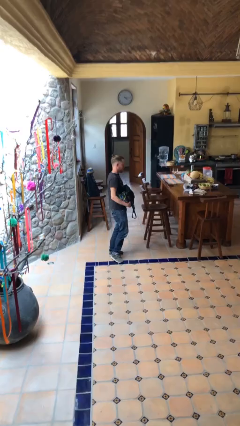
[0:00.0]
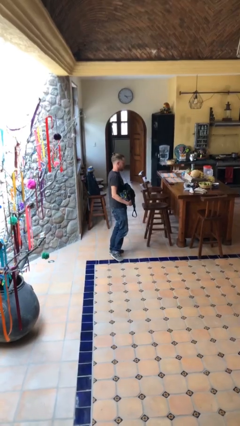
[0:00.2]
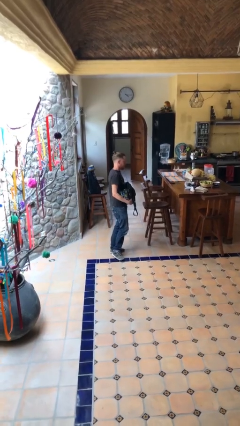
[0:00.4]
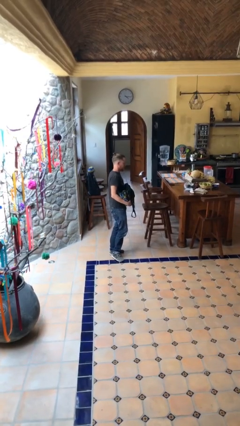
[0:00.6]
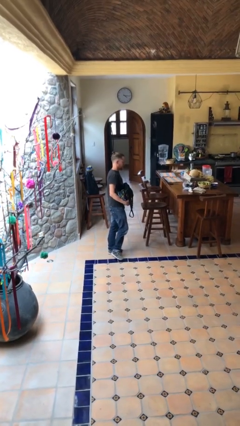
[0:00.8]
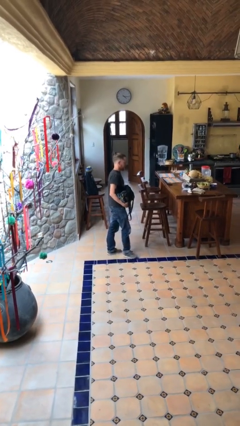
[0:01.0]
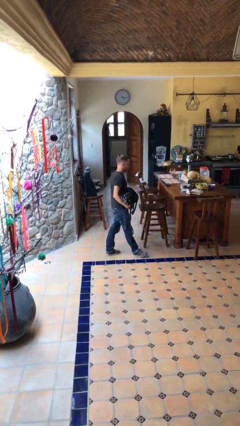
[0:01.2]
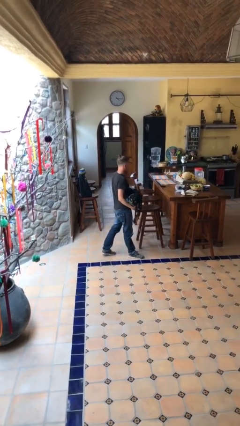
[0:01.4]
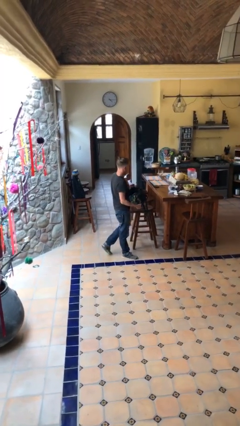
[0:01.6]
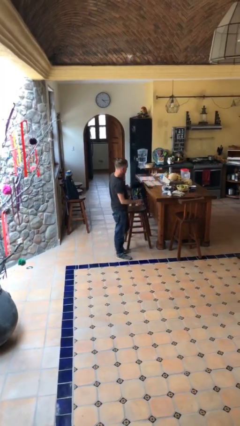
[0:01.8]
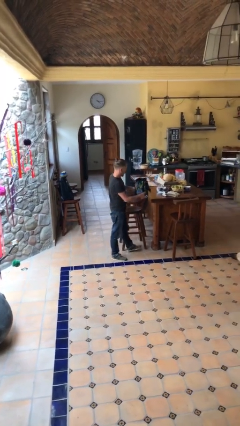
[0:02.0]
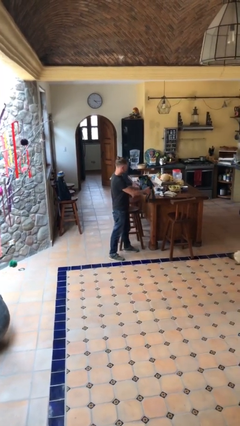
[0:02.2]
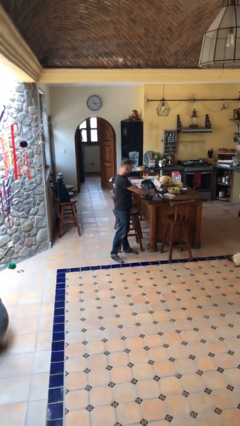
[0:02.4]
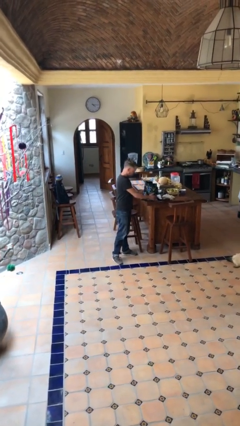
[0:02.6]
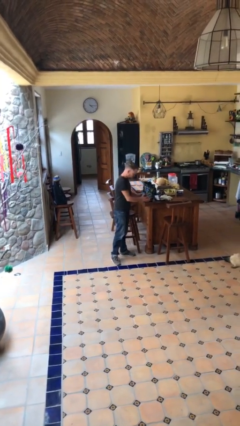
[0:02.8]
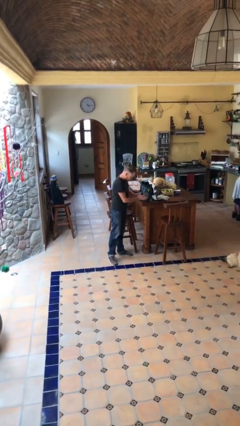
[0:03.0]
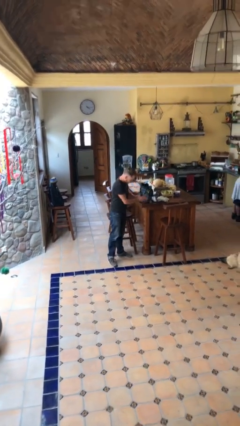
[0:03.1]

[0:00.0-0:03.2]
person puts down object on table

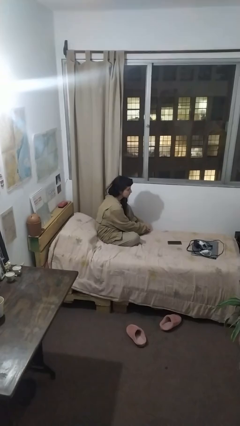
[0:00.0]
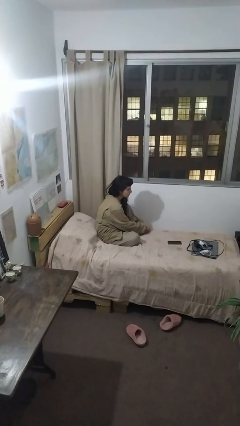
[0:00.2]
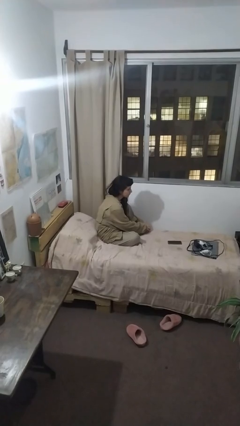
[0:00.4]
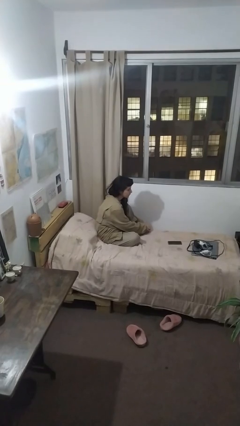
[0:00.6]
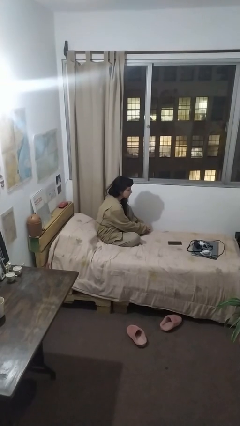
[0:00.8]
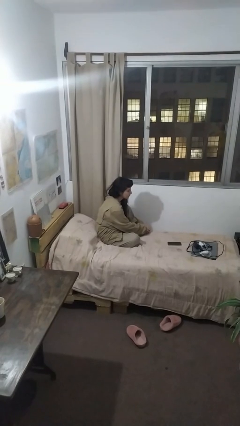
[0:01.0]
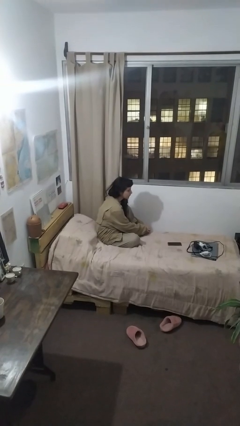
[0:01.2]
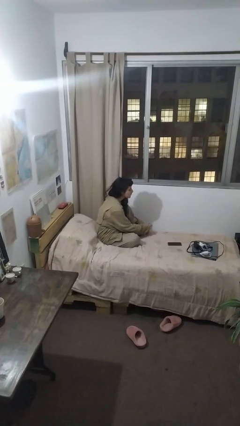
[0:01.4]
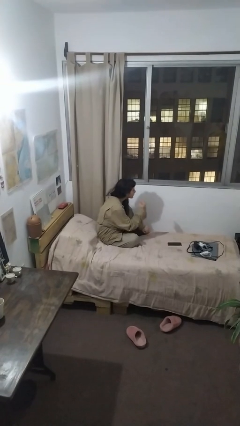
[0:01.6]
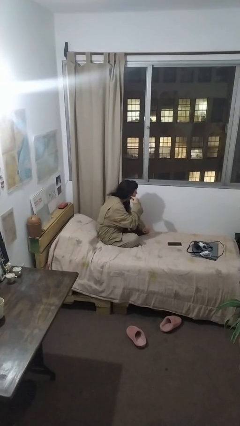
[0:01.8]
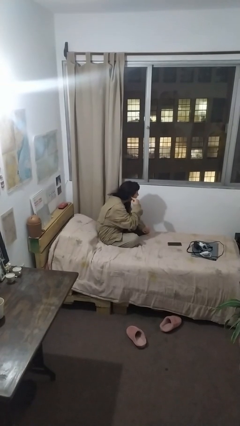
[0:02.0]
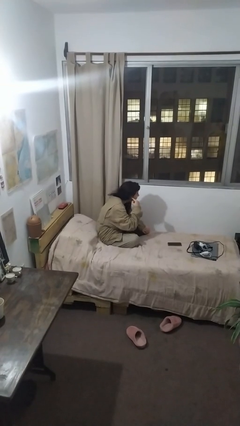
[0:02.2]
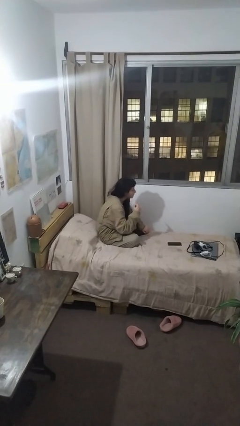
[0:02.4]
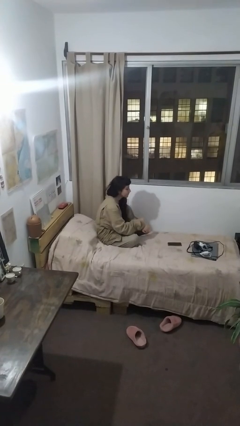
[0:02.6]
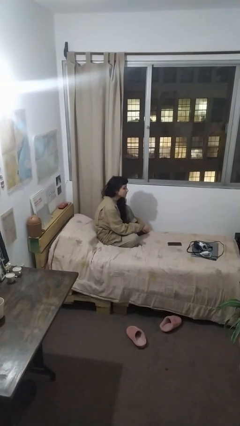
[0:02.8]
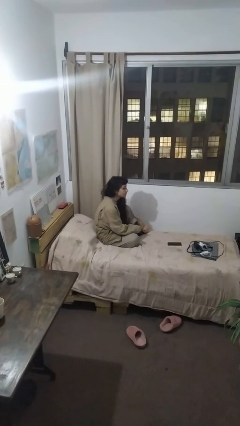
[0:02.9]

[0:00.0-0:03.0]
person gestures listen closely

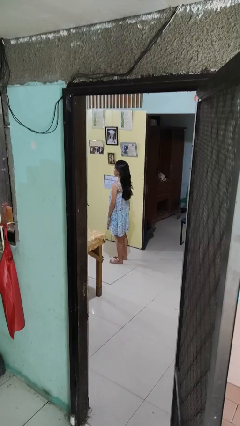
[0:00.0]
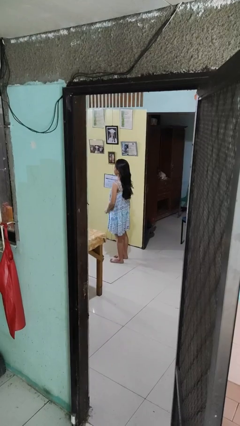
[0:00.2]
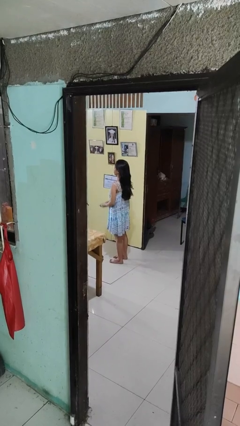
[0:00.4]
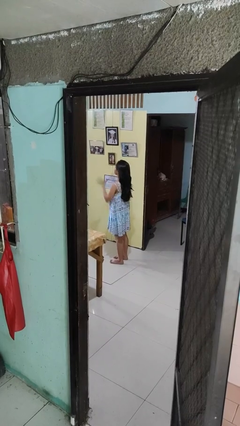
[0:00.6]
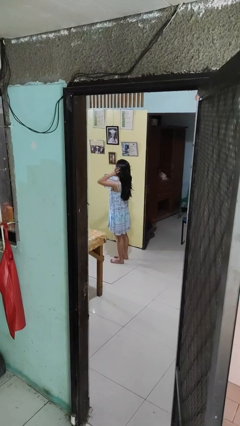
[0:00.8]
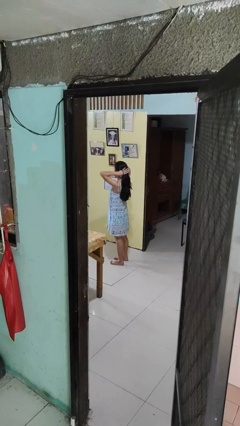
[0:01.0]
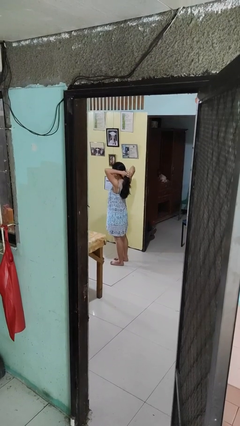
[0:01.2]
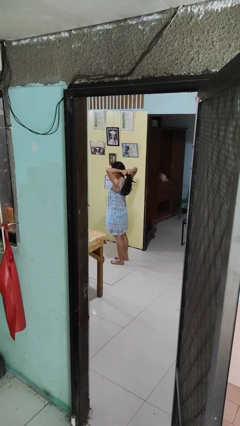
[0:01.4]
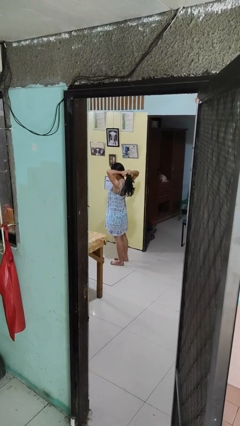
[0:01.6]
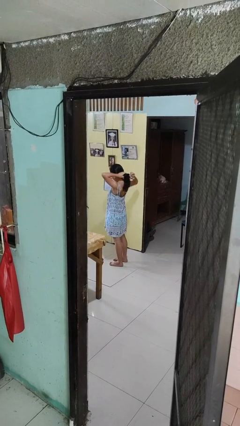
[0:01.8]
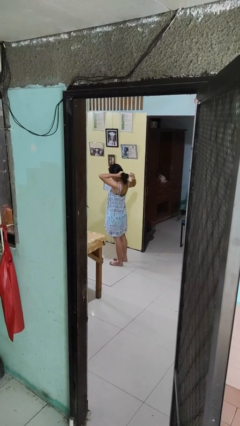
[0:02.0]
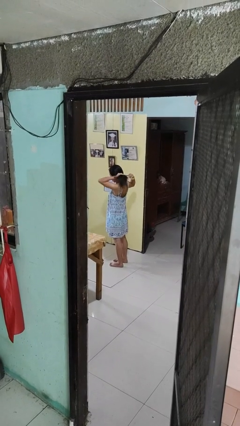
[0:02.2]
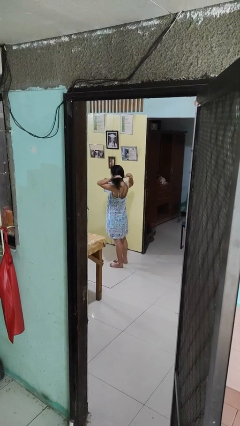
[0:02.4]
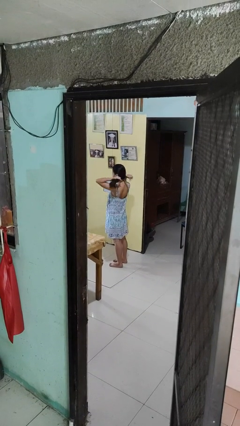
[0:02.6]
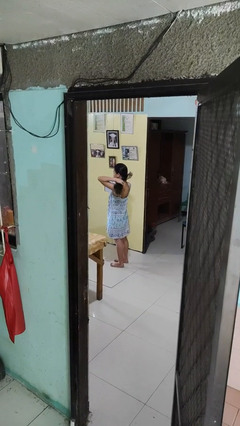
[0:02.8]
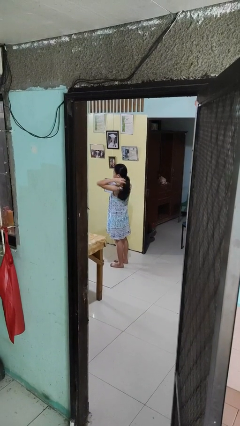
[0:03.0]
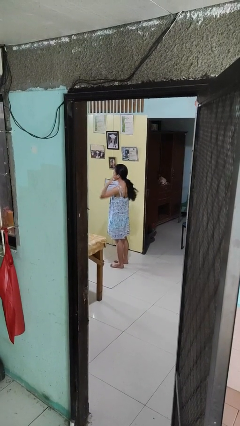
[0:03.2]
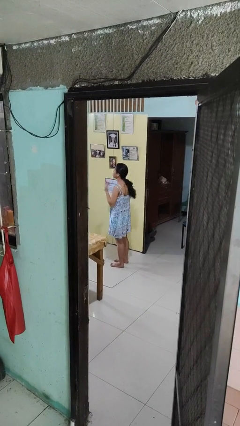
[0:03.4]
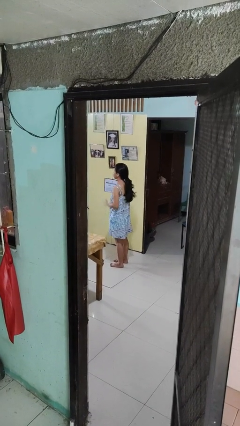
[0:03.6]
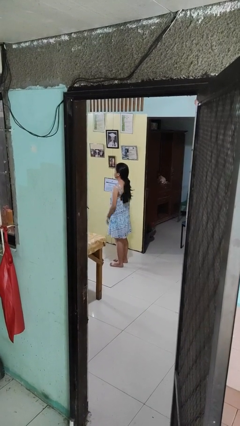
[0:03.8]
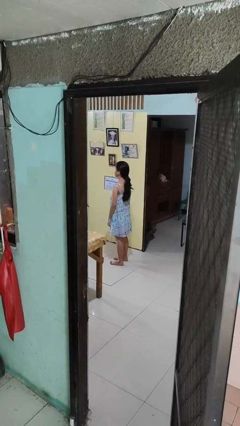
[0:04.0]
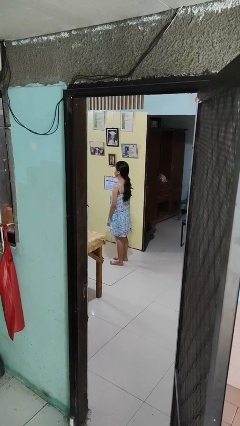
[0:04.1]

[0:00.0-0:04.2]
person puts hair in ponytail

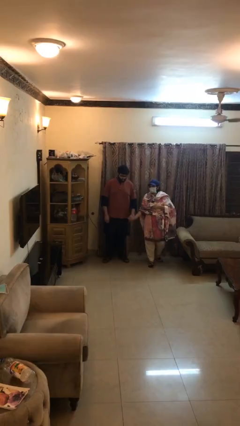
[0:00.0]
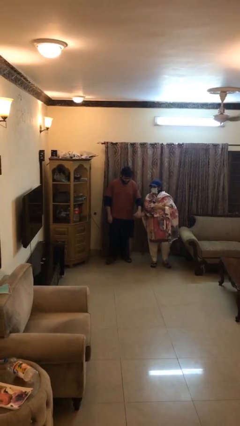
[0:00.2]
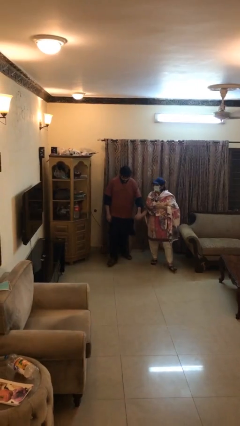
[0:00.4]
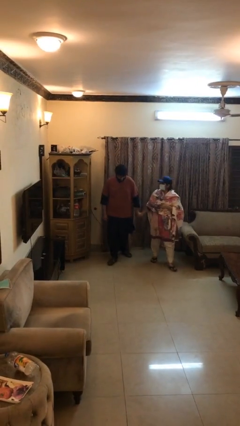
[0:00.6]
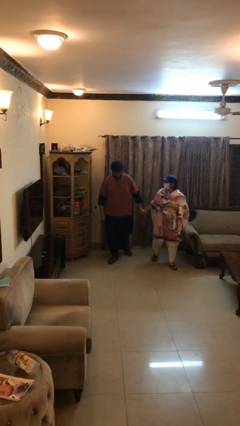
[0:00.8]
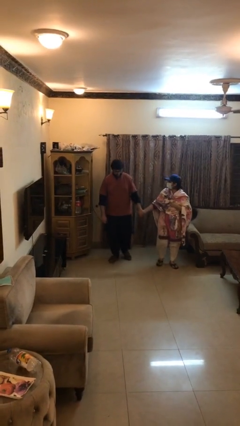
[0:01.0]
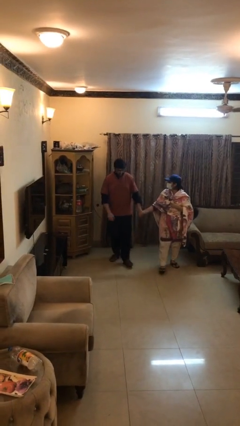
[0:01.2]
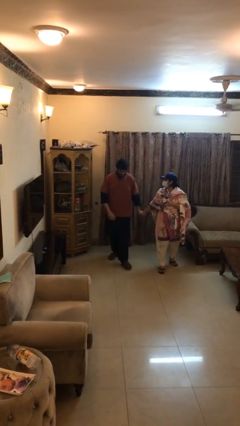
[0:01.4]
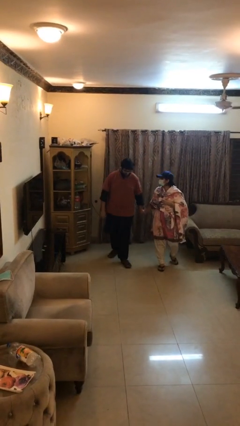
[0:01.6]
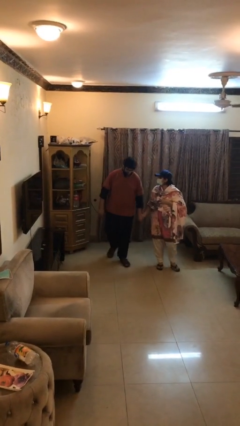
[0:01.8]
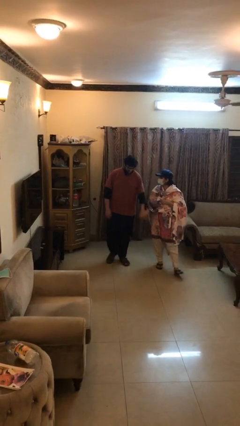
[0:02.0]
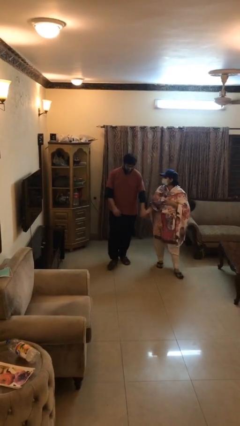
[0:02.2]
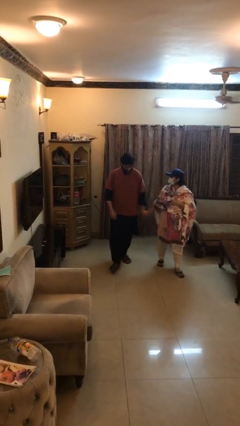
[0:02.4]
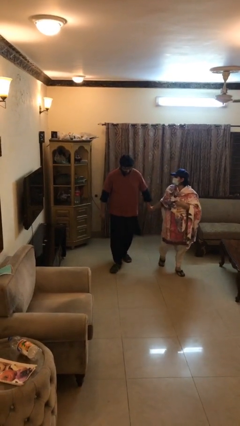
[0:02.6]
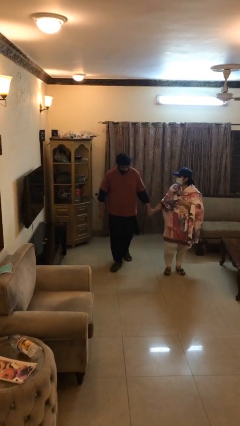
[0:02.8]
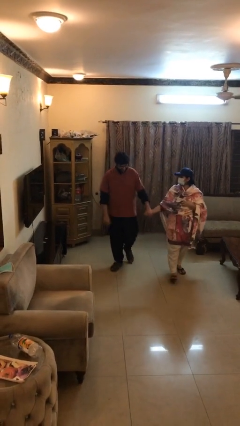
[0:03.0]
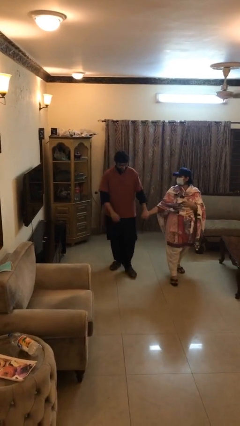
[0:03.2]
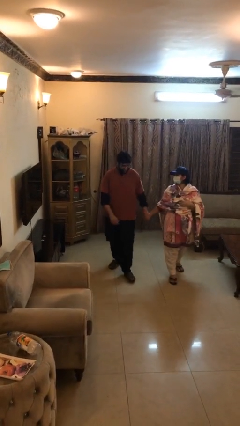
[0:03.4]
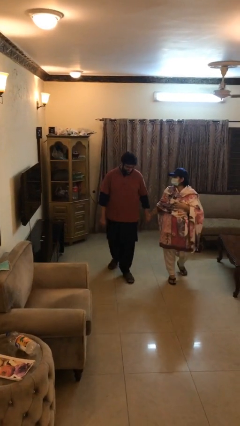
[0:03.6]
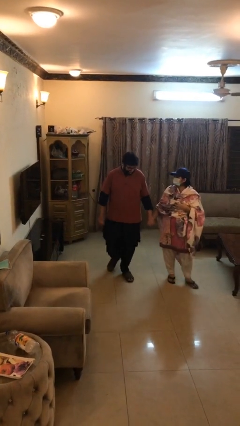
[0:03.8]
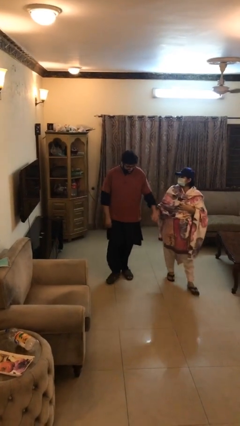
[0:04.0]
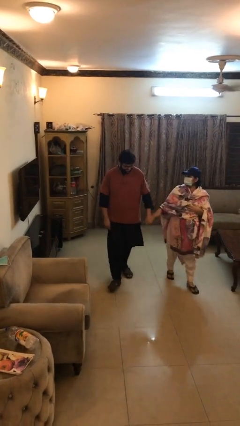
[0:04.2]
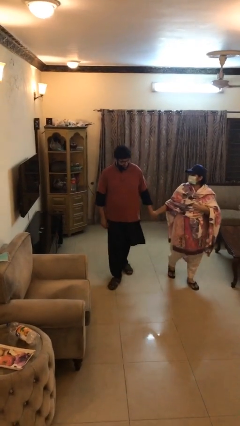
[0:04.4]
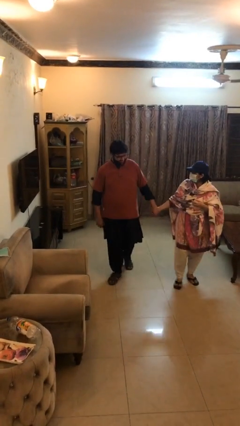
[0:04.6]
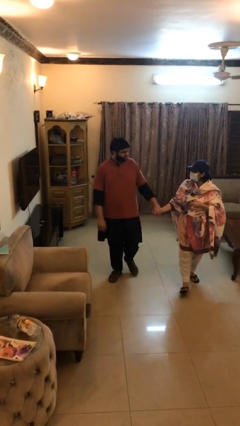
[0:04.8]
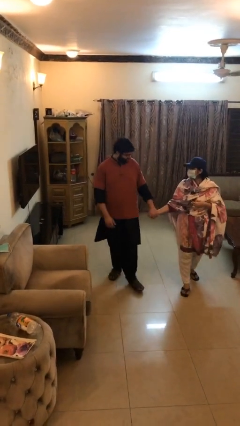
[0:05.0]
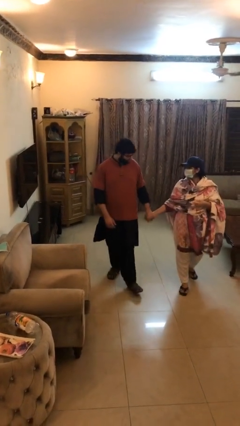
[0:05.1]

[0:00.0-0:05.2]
person holds hand

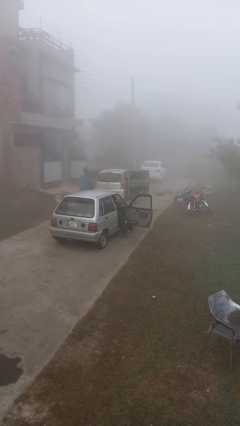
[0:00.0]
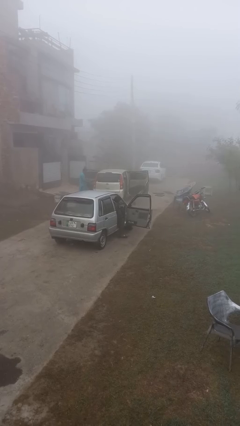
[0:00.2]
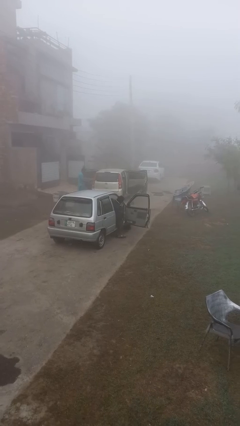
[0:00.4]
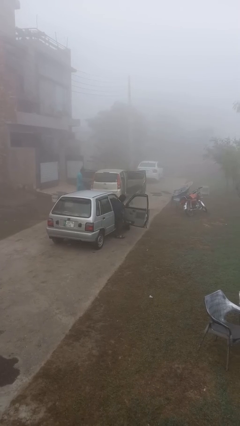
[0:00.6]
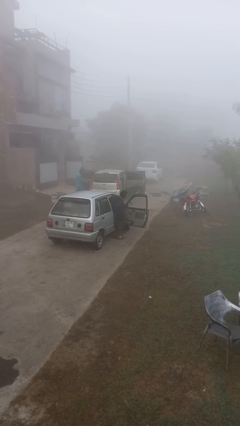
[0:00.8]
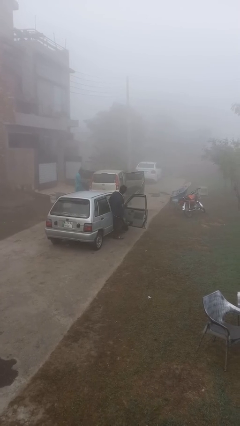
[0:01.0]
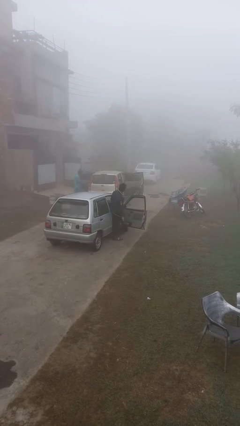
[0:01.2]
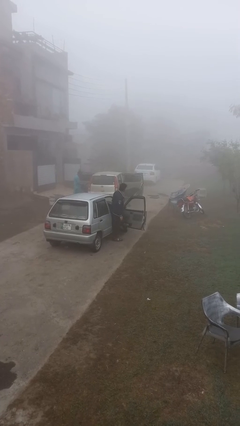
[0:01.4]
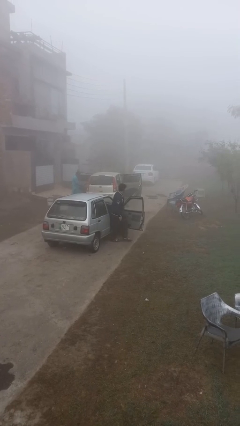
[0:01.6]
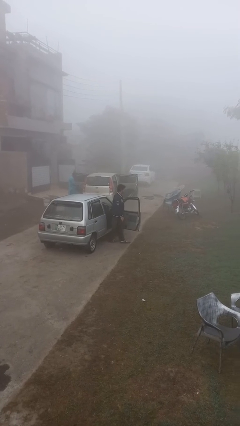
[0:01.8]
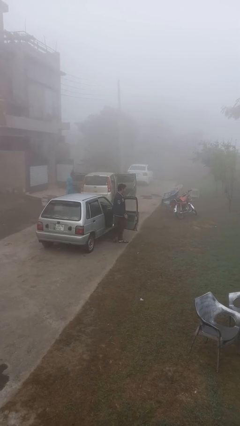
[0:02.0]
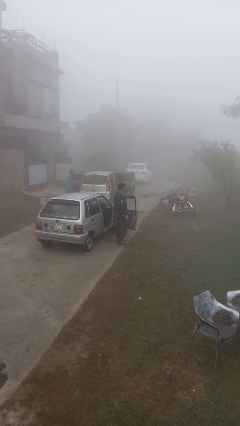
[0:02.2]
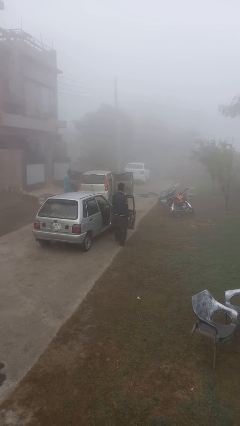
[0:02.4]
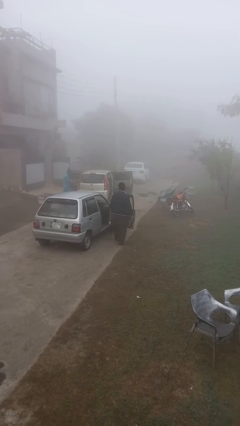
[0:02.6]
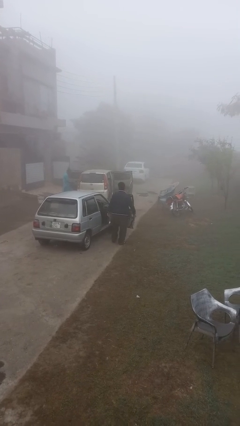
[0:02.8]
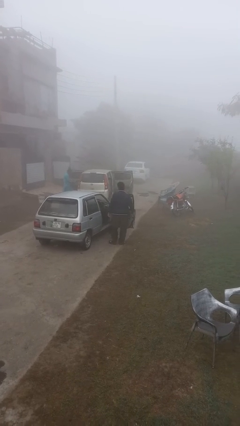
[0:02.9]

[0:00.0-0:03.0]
person exits car
